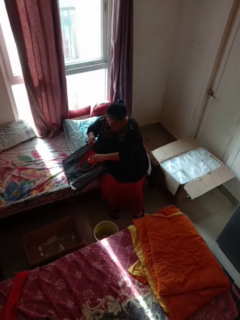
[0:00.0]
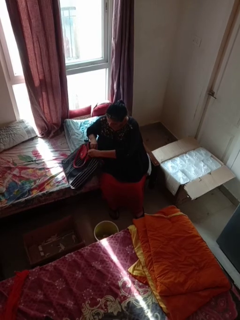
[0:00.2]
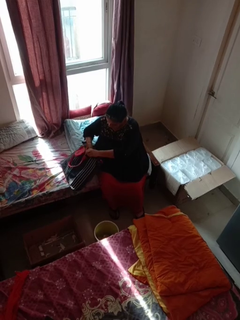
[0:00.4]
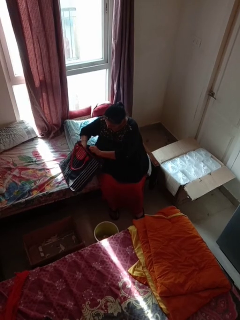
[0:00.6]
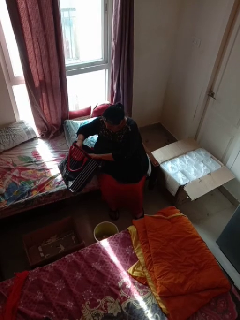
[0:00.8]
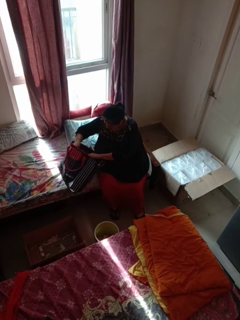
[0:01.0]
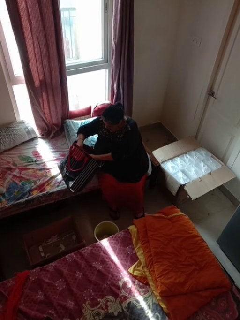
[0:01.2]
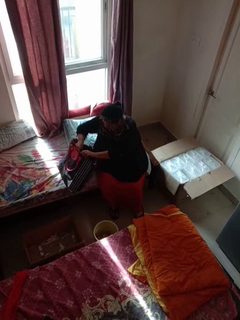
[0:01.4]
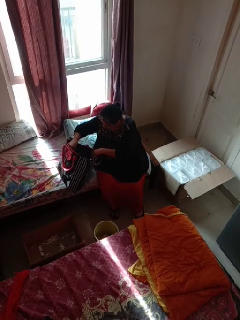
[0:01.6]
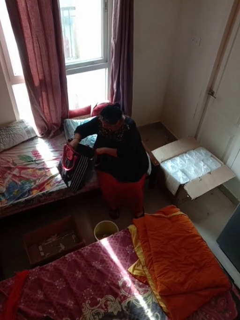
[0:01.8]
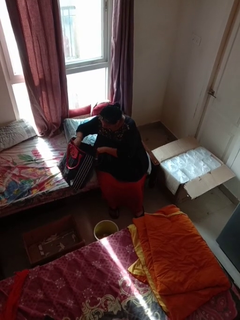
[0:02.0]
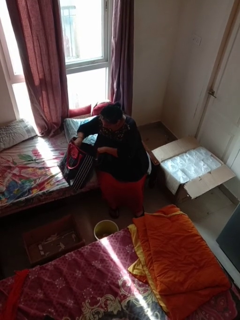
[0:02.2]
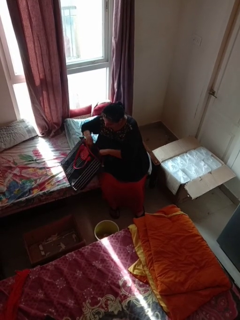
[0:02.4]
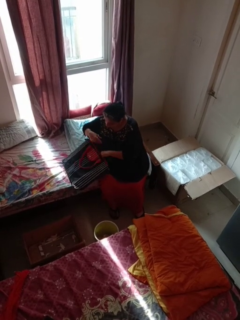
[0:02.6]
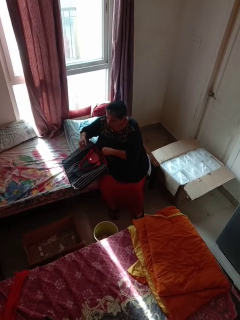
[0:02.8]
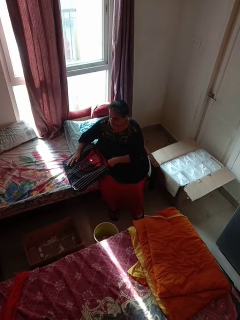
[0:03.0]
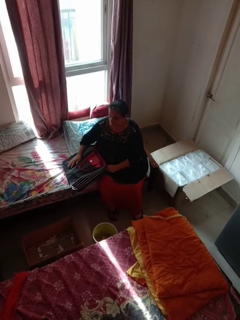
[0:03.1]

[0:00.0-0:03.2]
person searches in bag

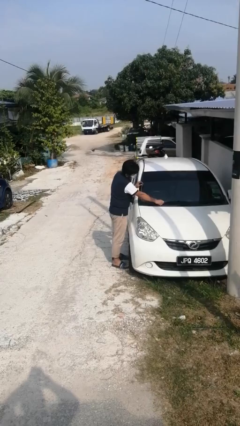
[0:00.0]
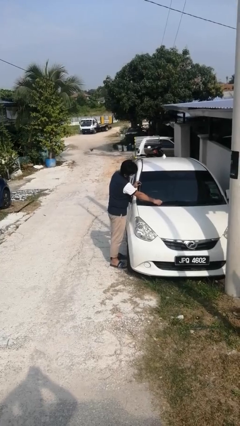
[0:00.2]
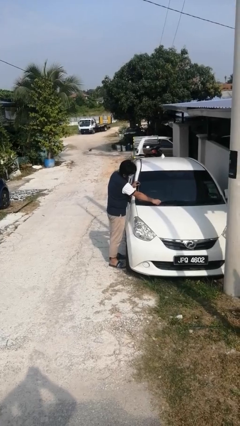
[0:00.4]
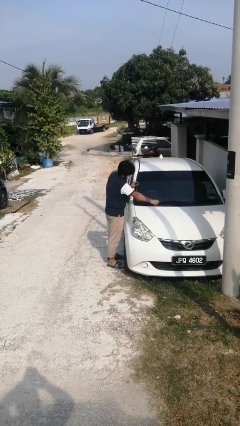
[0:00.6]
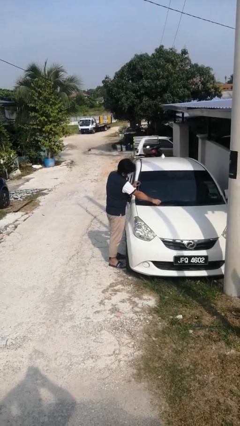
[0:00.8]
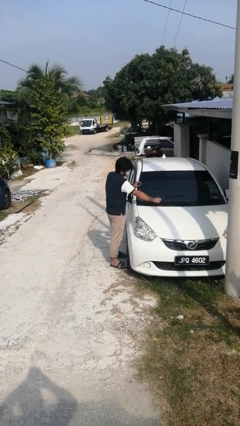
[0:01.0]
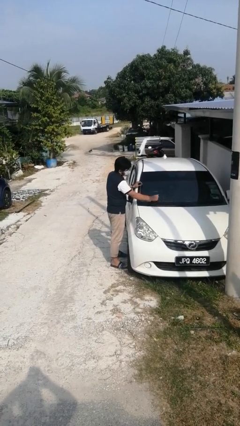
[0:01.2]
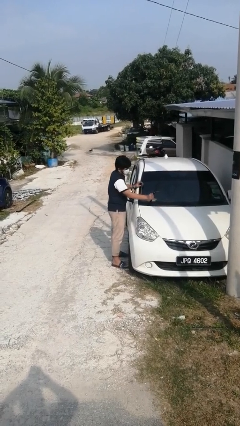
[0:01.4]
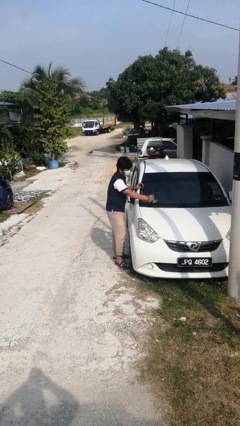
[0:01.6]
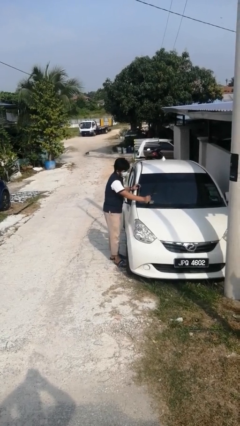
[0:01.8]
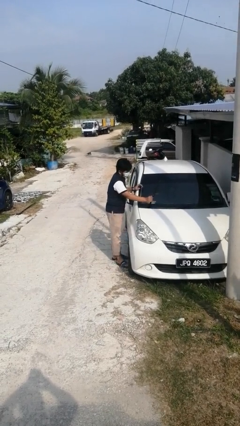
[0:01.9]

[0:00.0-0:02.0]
person flips up car wipers

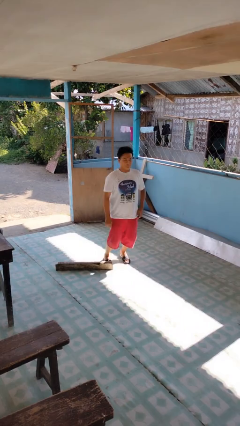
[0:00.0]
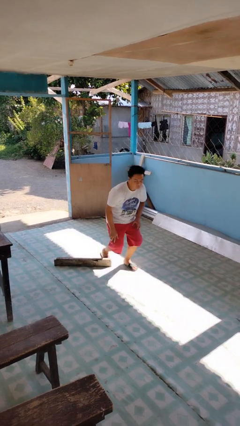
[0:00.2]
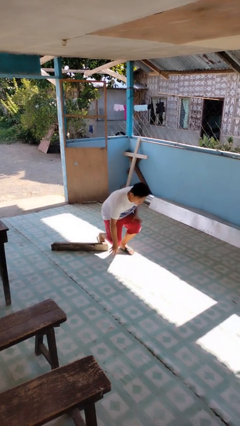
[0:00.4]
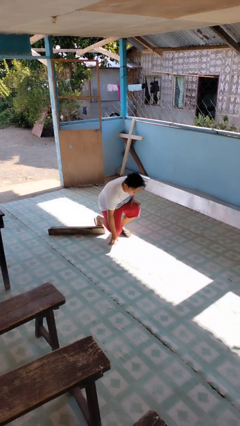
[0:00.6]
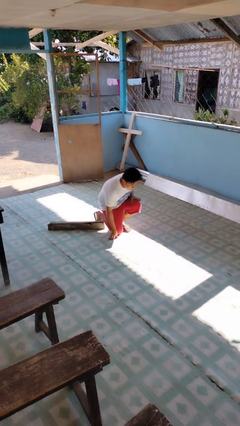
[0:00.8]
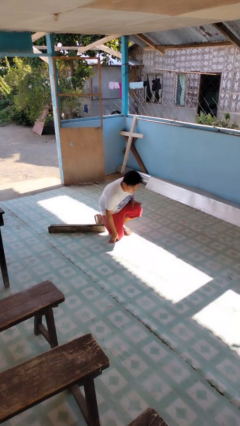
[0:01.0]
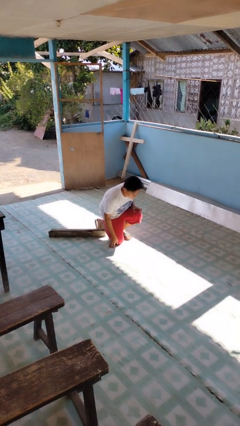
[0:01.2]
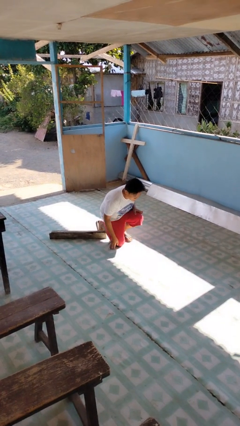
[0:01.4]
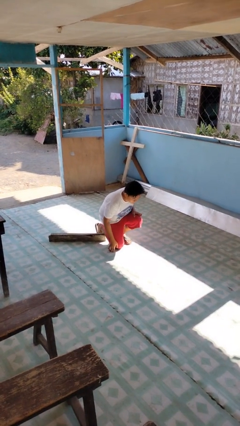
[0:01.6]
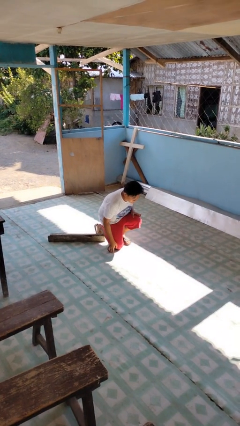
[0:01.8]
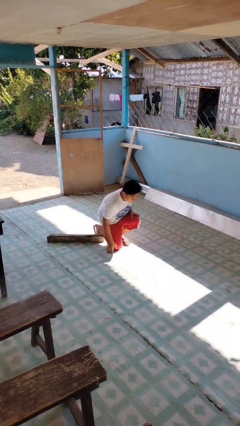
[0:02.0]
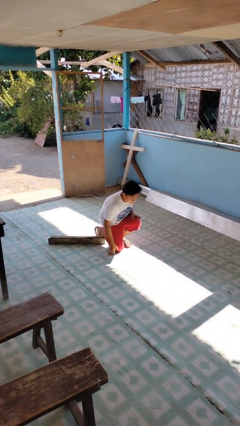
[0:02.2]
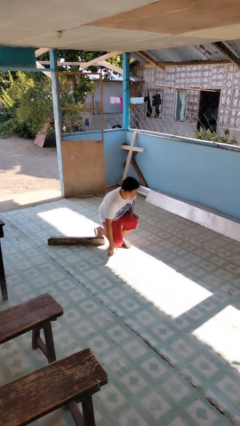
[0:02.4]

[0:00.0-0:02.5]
person trips on object on floor

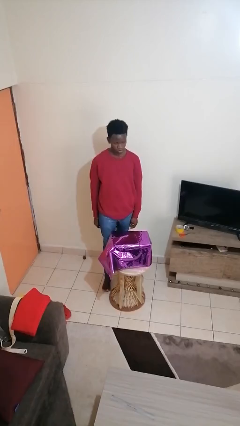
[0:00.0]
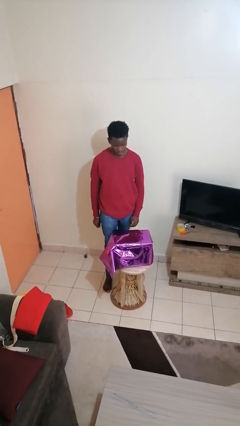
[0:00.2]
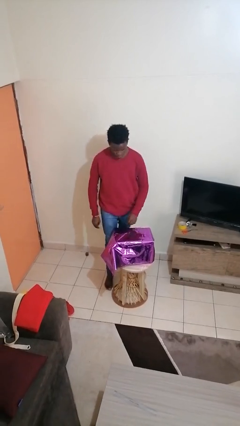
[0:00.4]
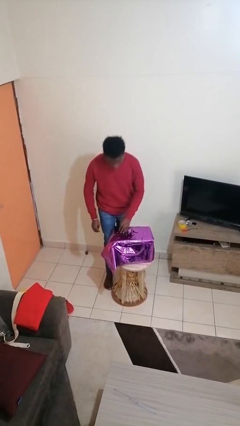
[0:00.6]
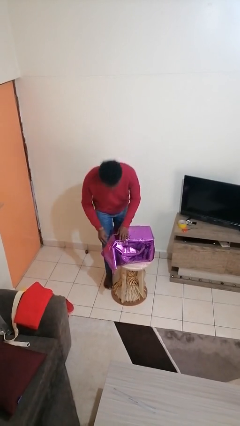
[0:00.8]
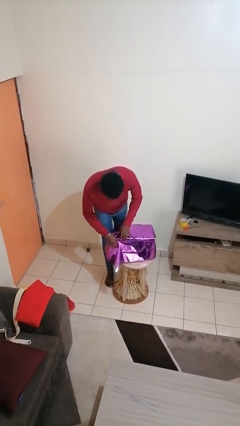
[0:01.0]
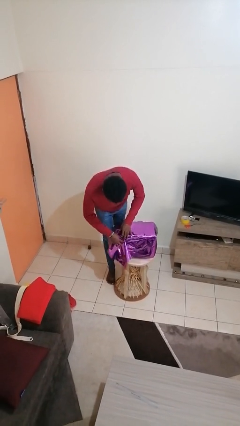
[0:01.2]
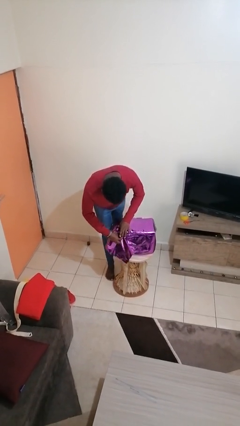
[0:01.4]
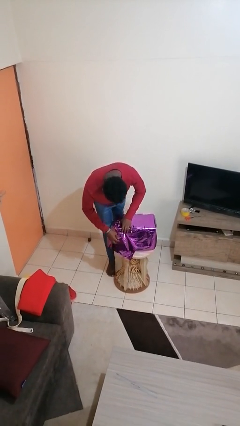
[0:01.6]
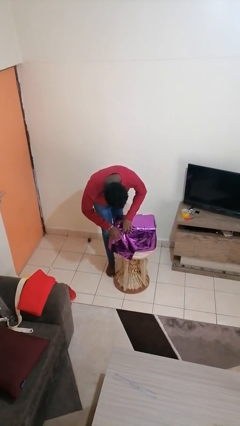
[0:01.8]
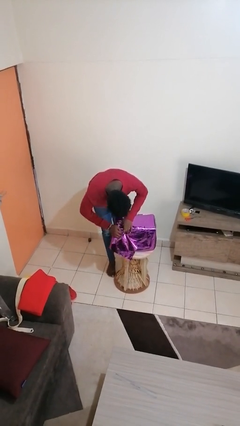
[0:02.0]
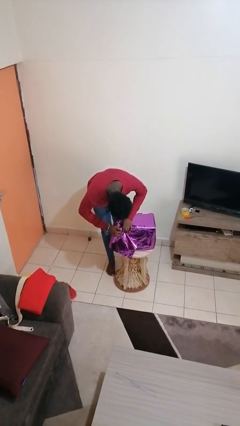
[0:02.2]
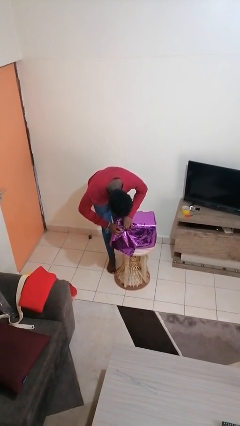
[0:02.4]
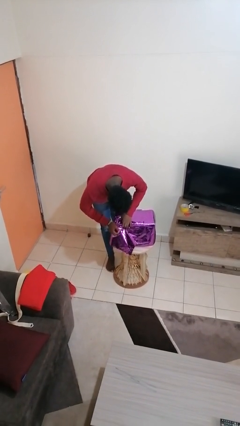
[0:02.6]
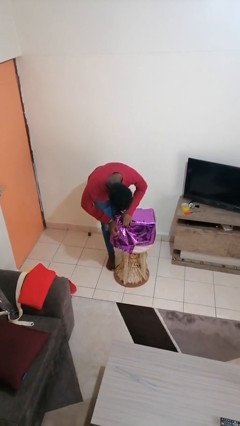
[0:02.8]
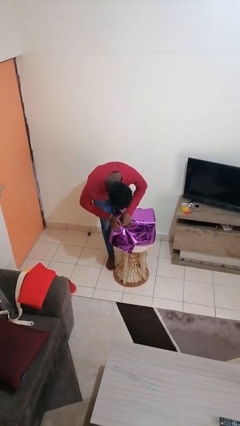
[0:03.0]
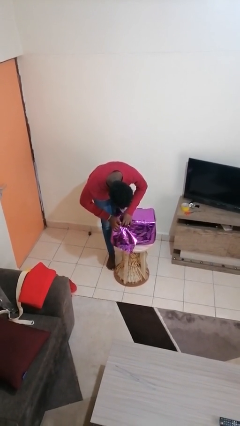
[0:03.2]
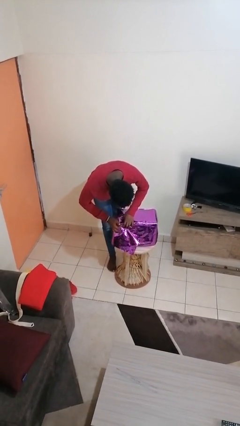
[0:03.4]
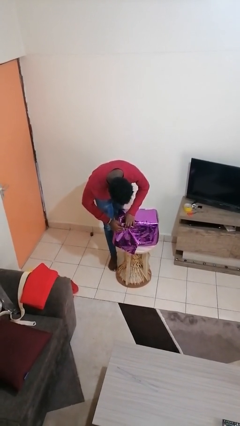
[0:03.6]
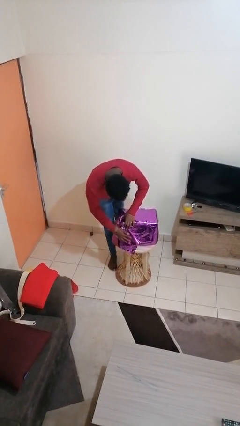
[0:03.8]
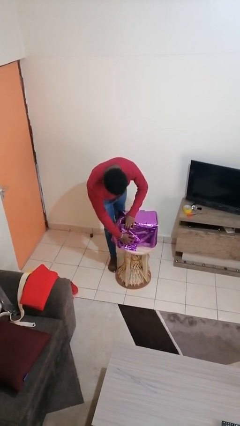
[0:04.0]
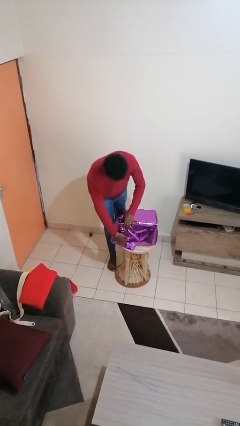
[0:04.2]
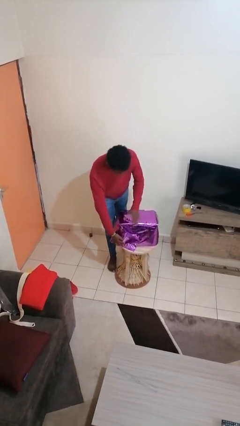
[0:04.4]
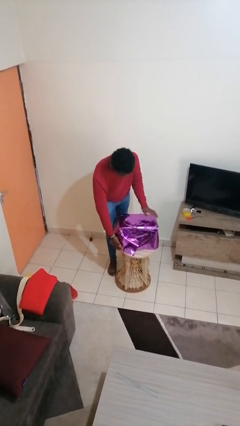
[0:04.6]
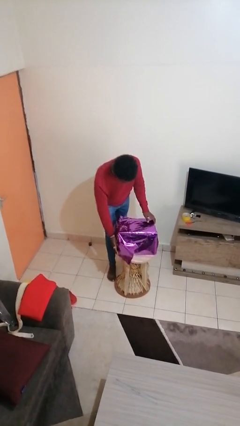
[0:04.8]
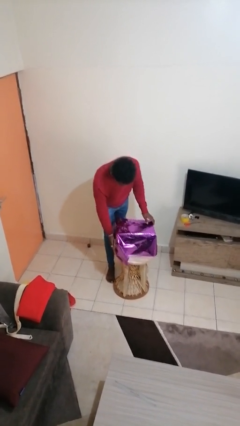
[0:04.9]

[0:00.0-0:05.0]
person wraps box

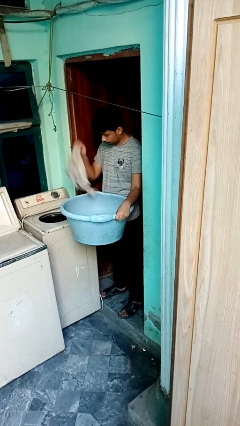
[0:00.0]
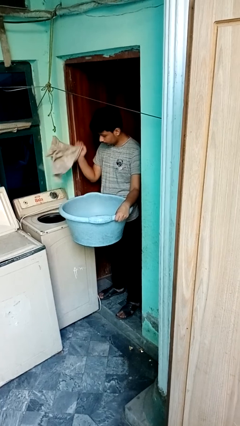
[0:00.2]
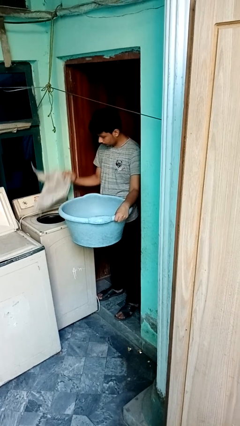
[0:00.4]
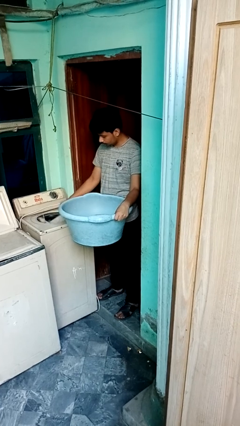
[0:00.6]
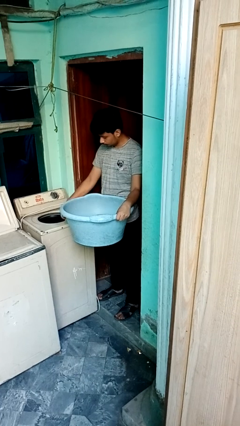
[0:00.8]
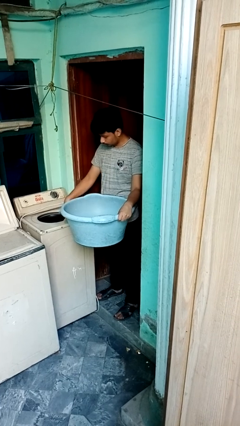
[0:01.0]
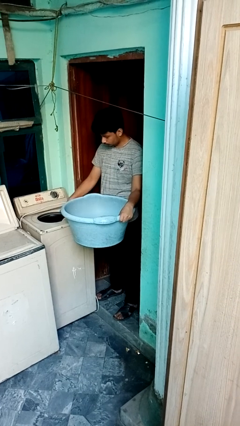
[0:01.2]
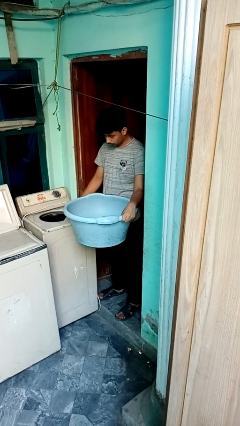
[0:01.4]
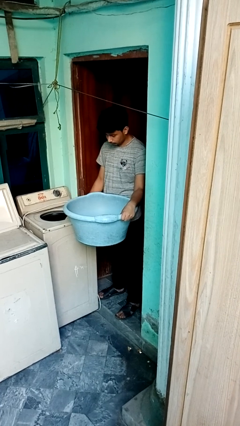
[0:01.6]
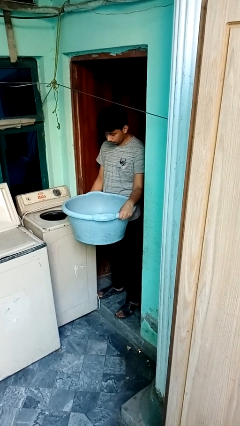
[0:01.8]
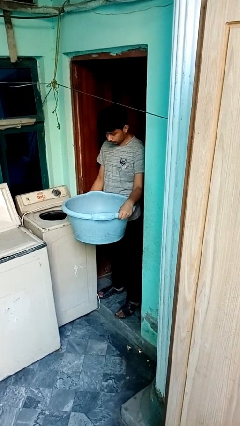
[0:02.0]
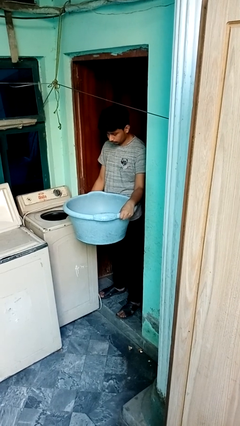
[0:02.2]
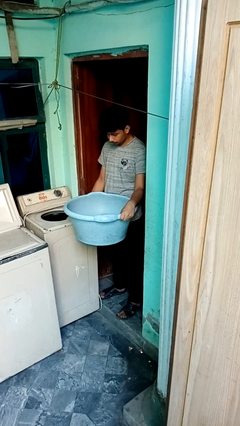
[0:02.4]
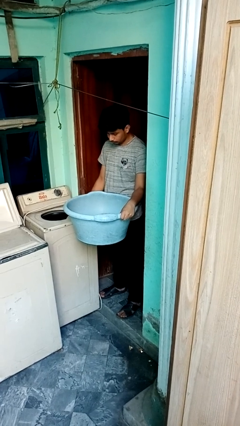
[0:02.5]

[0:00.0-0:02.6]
person loads dryer

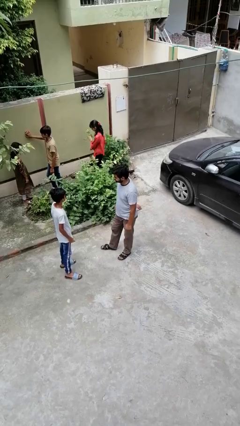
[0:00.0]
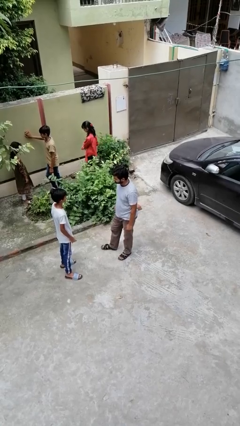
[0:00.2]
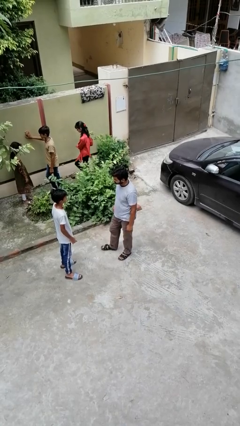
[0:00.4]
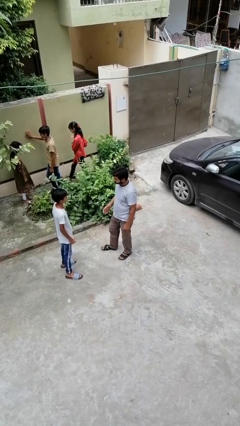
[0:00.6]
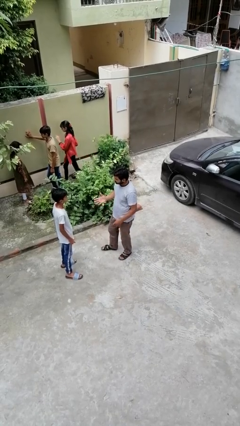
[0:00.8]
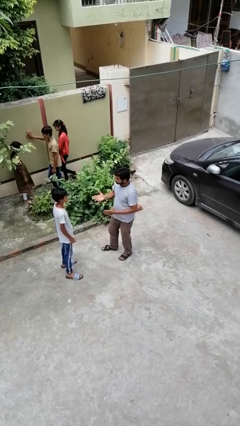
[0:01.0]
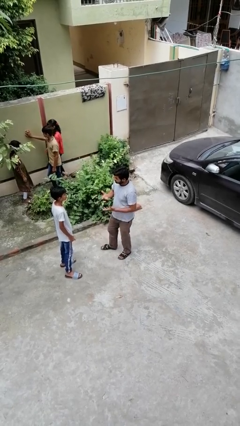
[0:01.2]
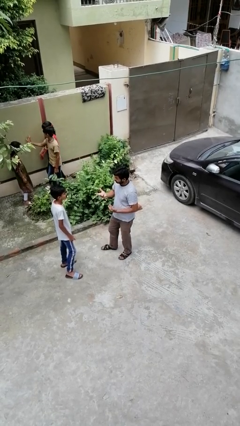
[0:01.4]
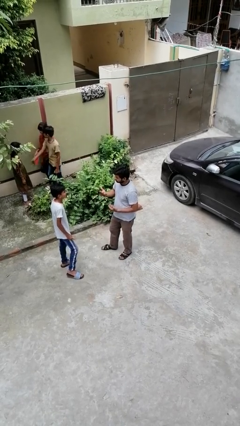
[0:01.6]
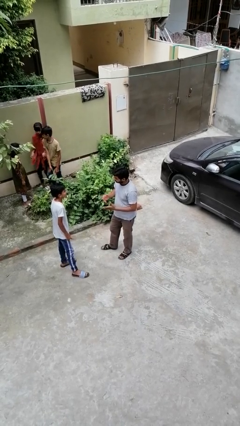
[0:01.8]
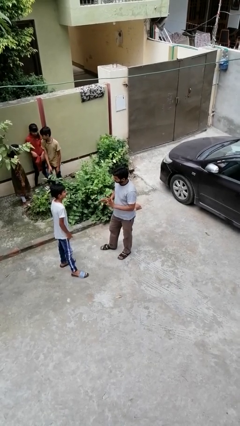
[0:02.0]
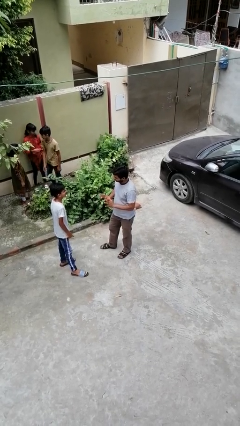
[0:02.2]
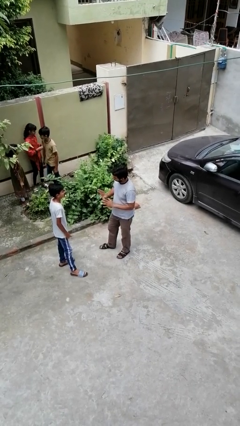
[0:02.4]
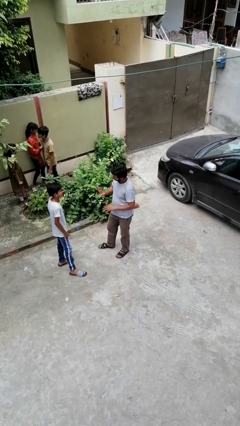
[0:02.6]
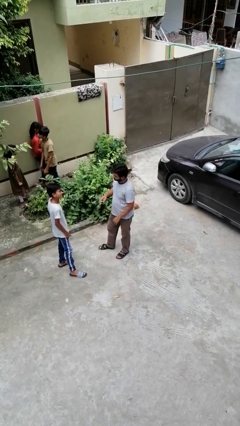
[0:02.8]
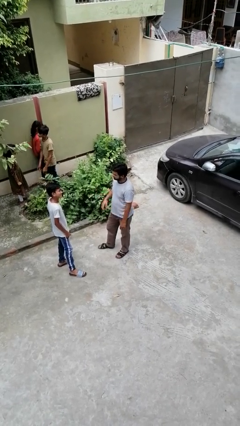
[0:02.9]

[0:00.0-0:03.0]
person talks to person
